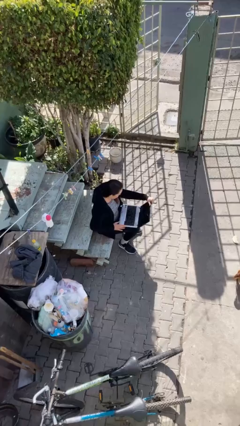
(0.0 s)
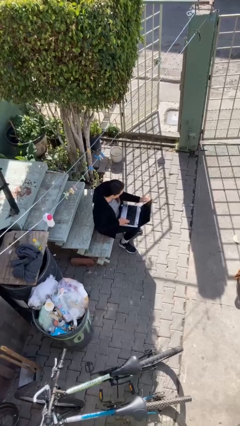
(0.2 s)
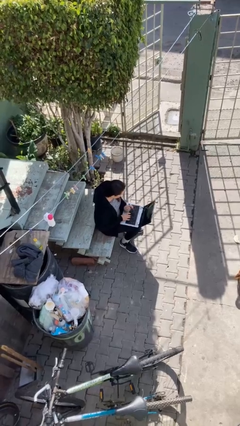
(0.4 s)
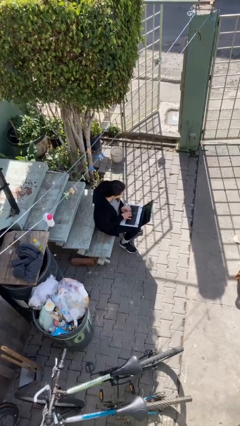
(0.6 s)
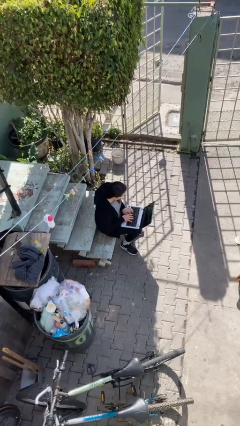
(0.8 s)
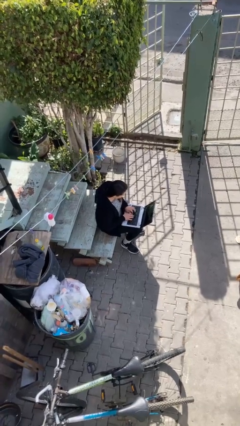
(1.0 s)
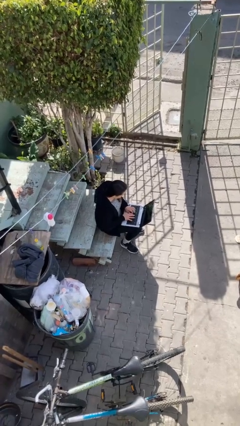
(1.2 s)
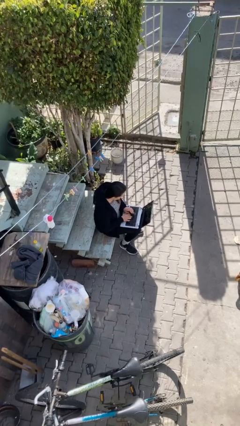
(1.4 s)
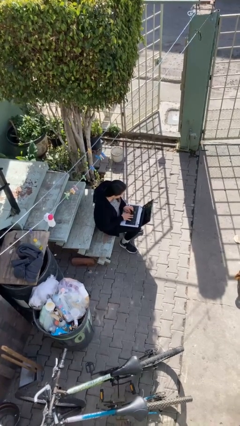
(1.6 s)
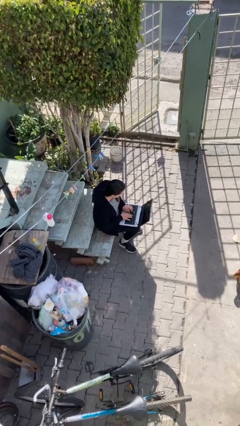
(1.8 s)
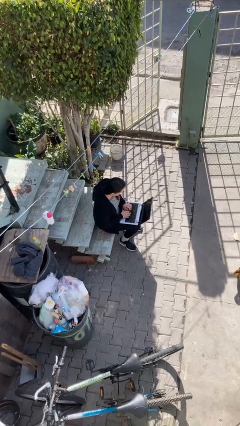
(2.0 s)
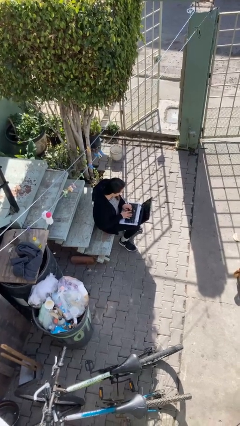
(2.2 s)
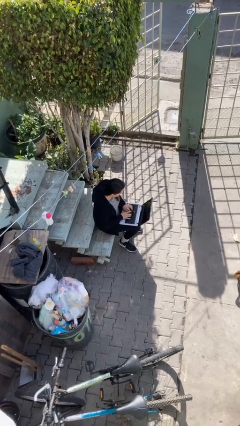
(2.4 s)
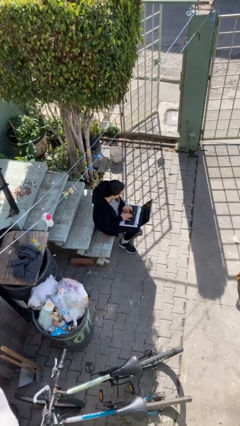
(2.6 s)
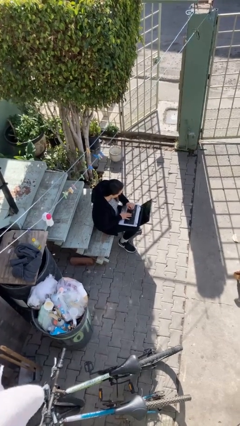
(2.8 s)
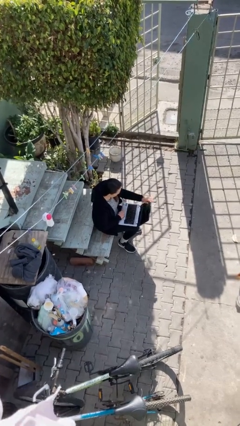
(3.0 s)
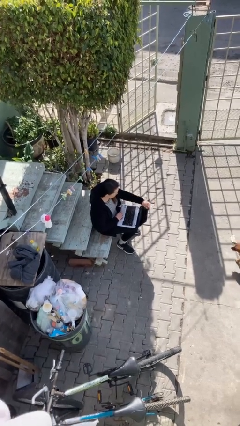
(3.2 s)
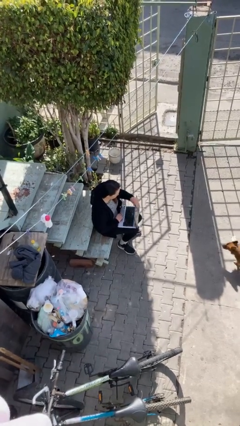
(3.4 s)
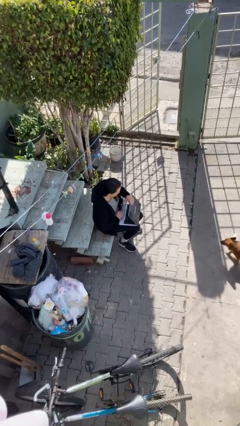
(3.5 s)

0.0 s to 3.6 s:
person interacts with laptop

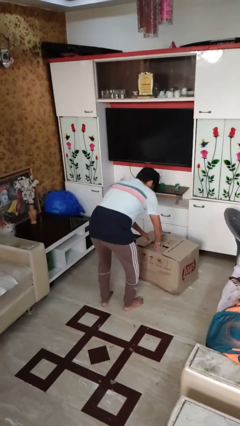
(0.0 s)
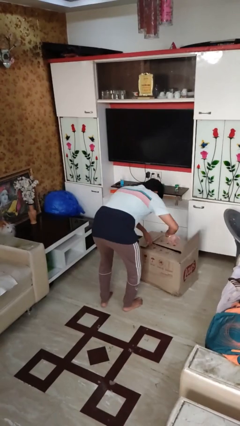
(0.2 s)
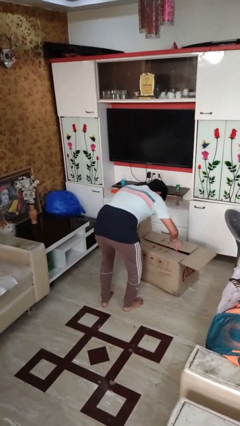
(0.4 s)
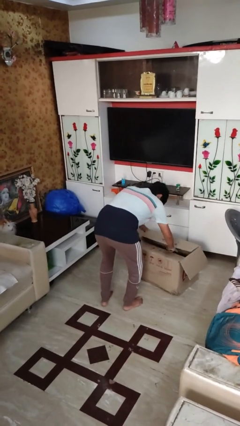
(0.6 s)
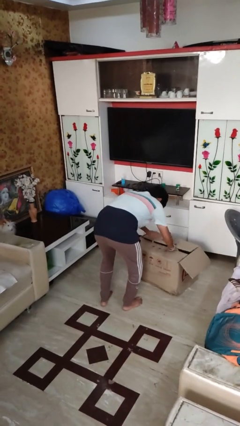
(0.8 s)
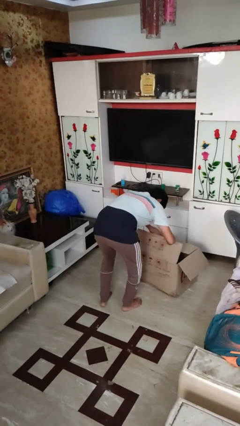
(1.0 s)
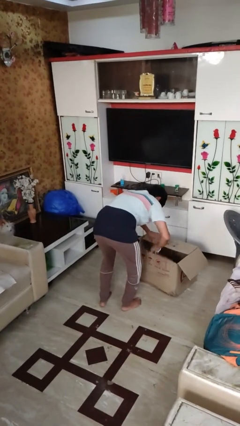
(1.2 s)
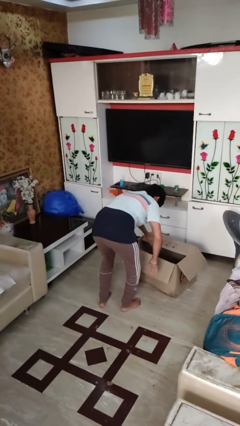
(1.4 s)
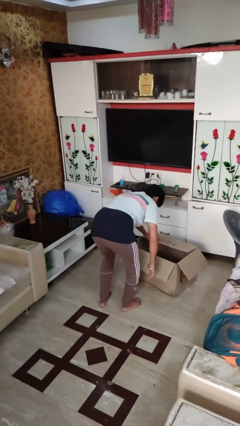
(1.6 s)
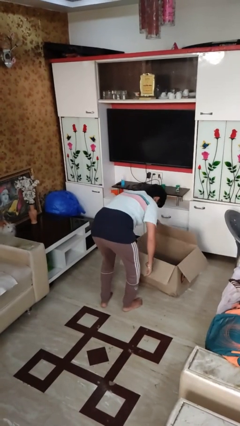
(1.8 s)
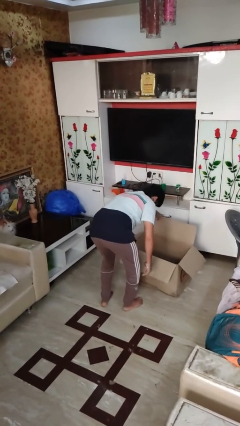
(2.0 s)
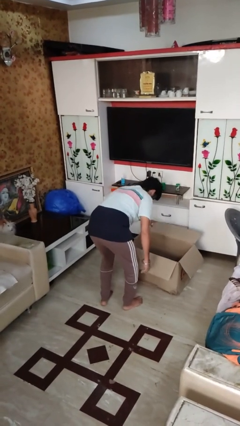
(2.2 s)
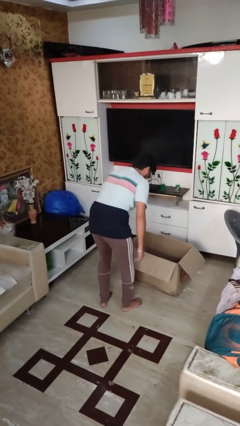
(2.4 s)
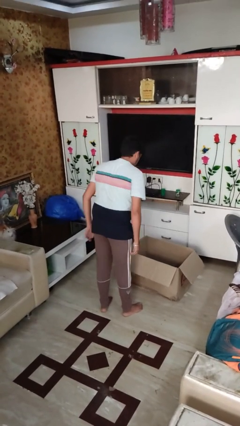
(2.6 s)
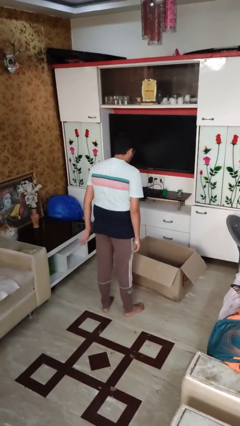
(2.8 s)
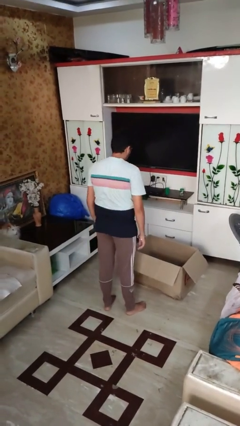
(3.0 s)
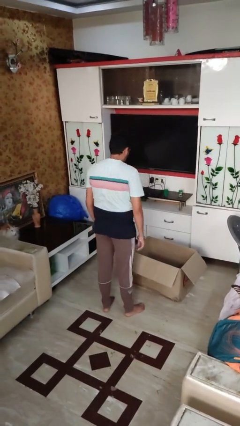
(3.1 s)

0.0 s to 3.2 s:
person opens box

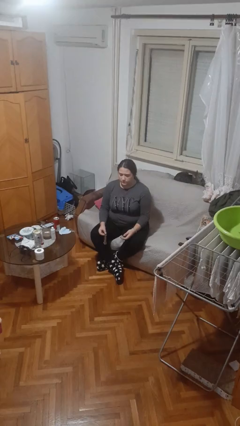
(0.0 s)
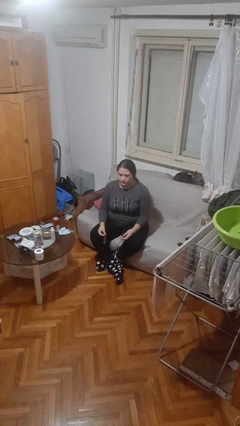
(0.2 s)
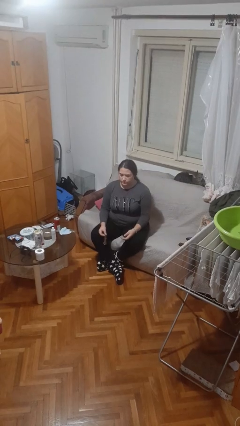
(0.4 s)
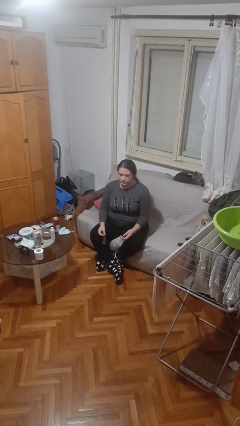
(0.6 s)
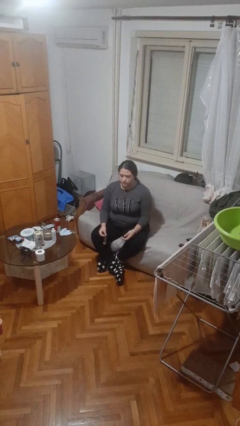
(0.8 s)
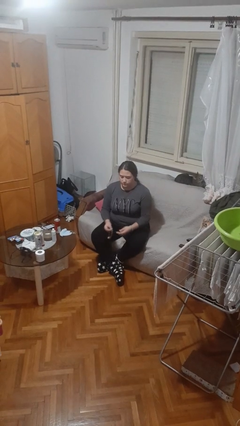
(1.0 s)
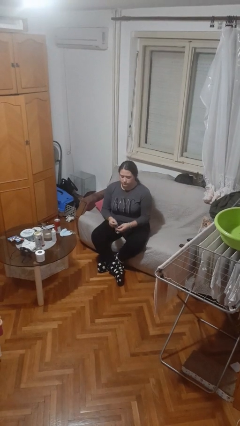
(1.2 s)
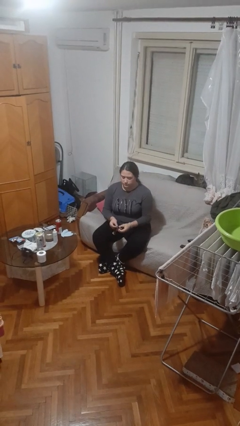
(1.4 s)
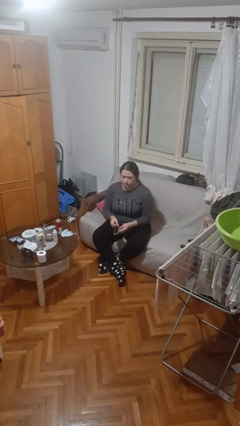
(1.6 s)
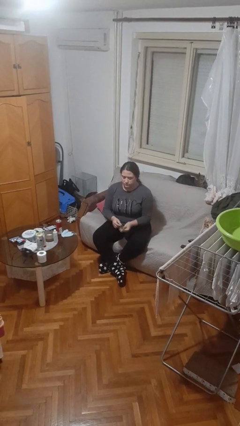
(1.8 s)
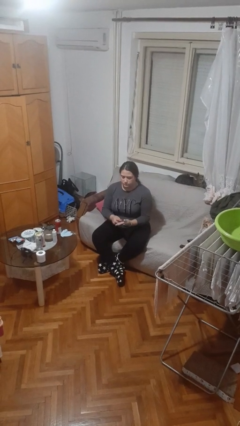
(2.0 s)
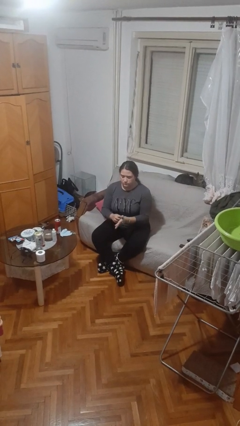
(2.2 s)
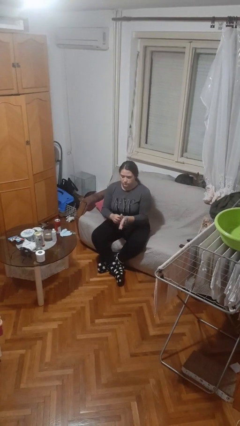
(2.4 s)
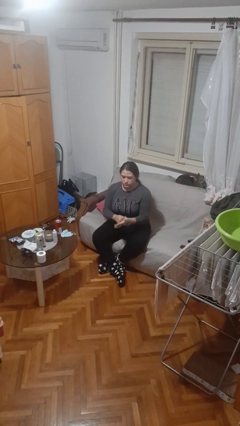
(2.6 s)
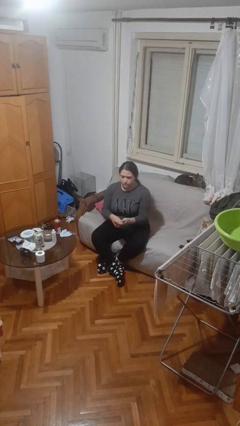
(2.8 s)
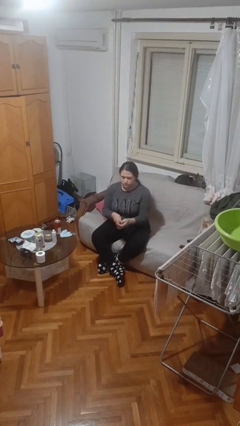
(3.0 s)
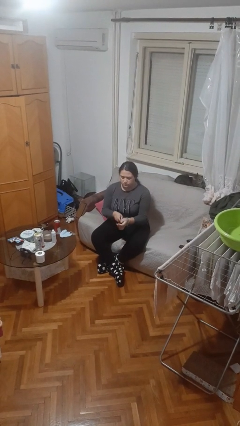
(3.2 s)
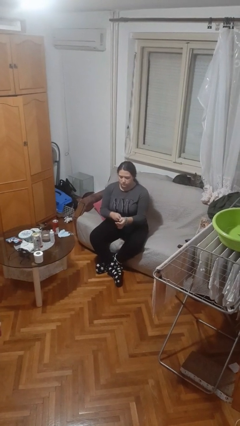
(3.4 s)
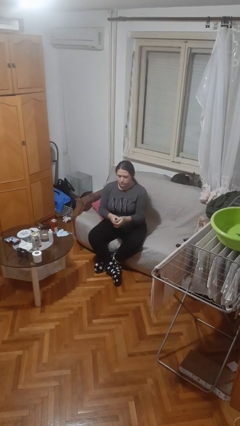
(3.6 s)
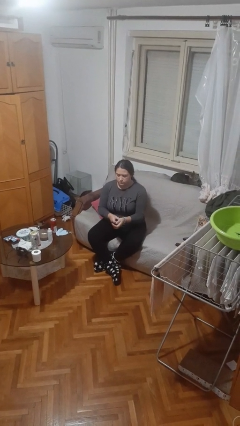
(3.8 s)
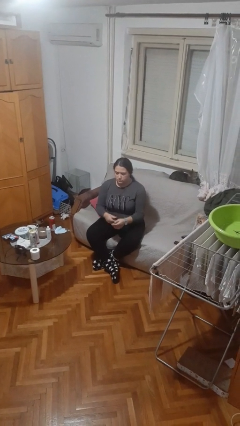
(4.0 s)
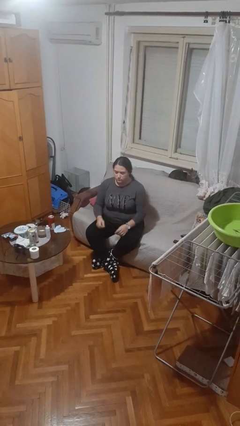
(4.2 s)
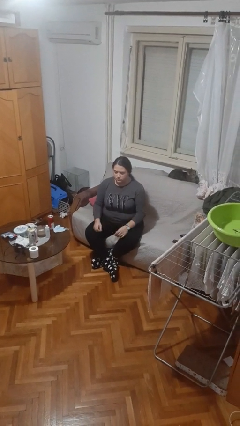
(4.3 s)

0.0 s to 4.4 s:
person puts on wristwatch

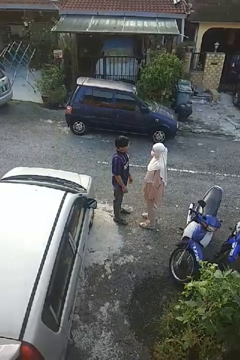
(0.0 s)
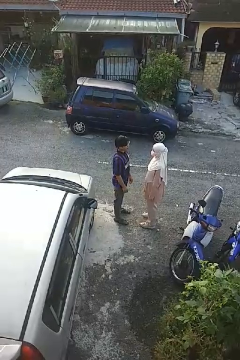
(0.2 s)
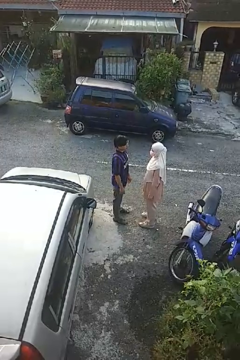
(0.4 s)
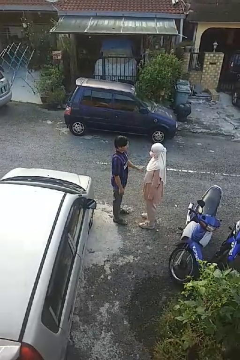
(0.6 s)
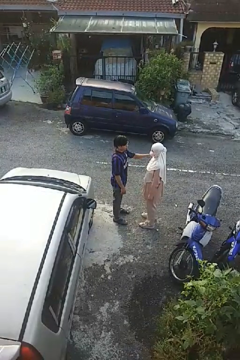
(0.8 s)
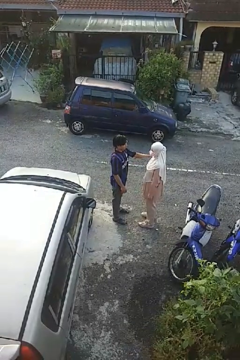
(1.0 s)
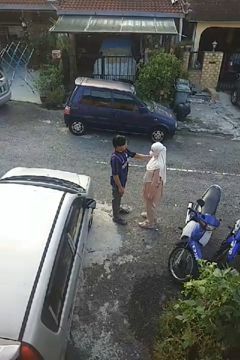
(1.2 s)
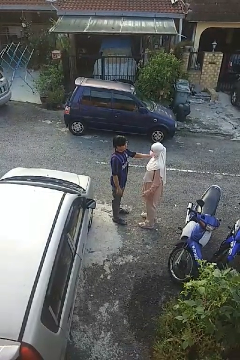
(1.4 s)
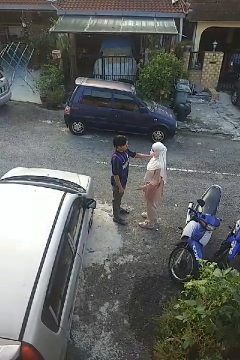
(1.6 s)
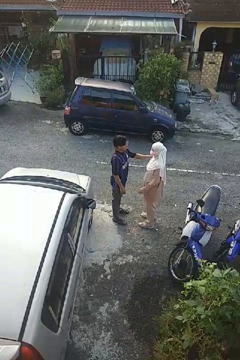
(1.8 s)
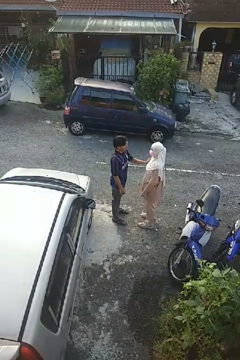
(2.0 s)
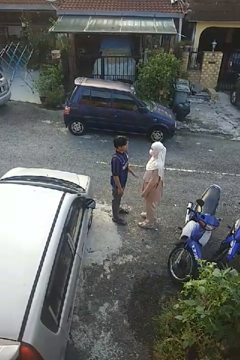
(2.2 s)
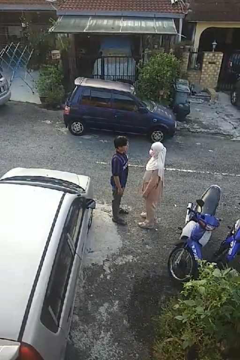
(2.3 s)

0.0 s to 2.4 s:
person pounds shoulders of person

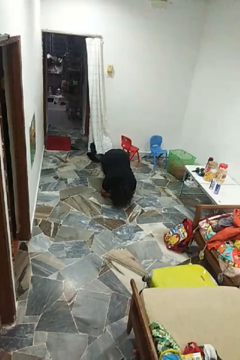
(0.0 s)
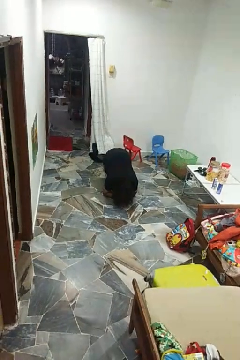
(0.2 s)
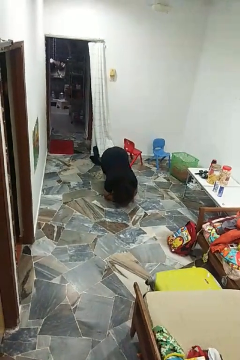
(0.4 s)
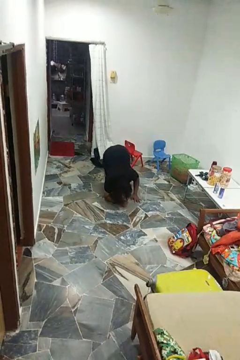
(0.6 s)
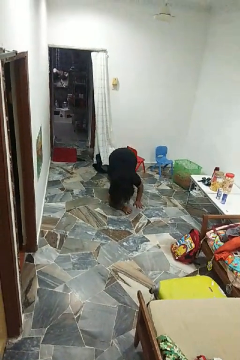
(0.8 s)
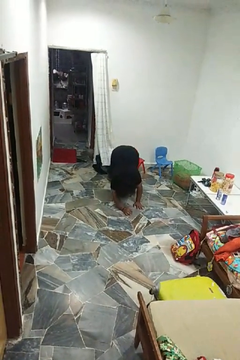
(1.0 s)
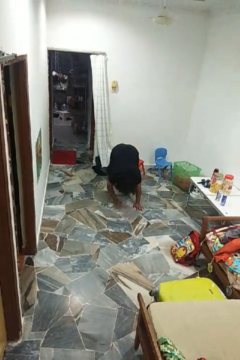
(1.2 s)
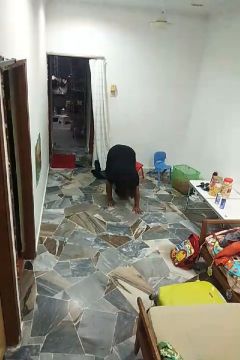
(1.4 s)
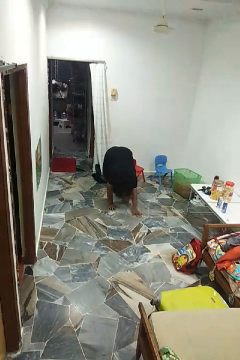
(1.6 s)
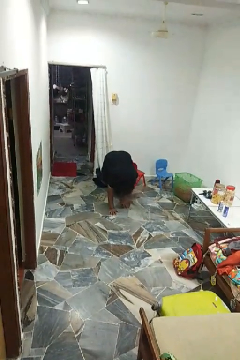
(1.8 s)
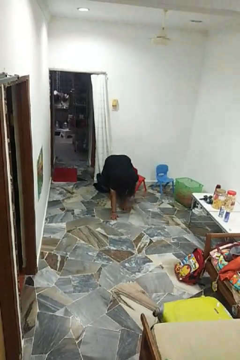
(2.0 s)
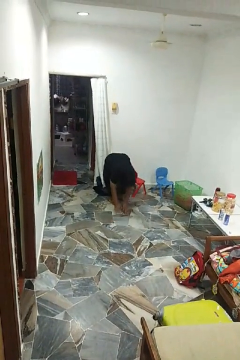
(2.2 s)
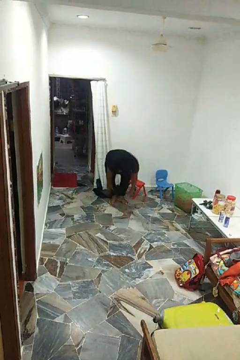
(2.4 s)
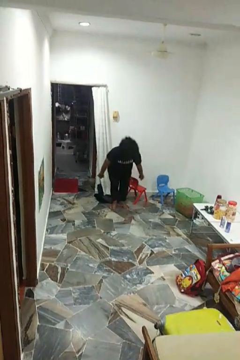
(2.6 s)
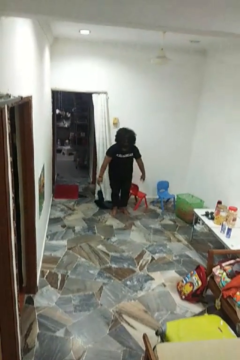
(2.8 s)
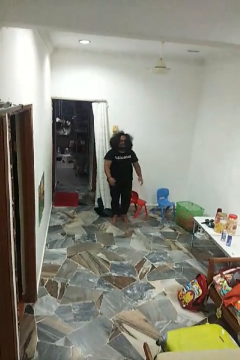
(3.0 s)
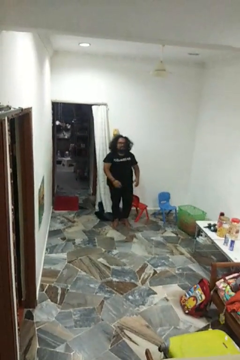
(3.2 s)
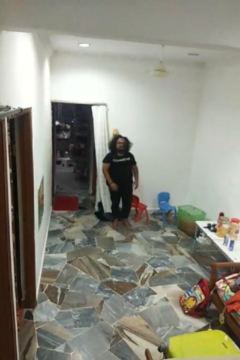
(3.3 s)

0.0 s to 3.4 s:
person stands up from floor

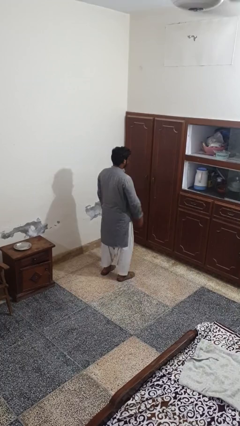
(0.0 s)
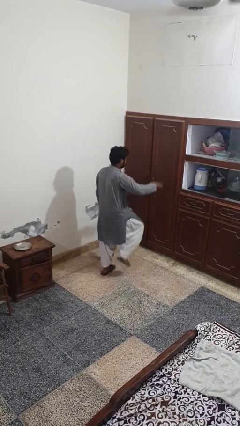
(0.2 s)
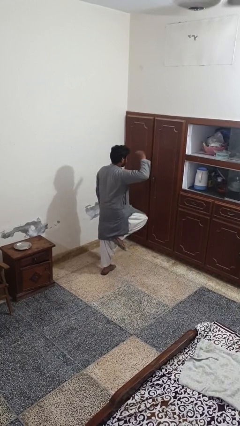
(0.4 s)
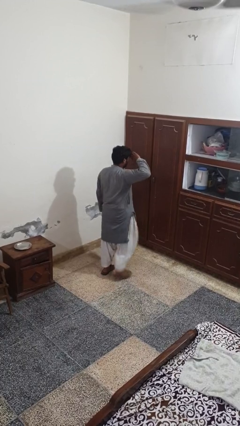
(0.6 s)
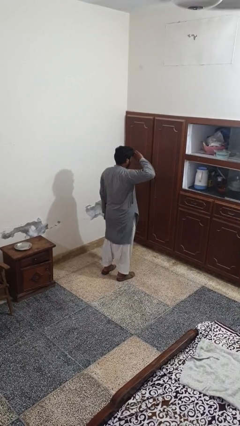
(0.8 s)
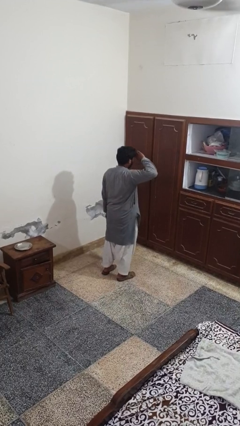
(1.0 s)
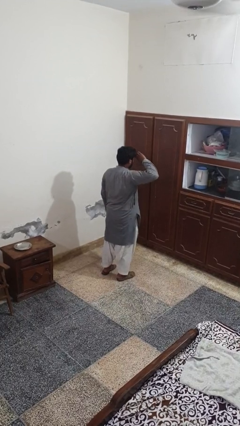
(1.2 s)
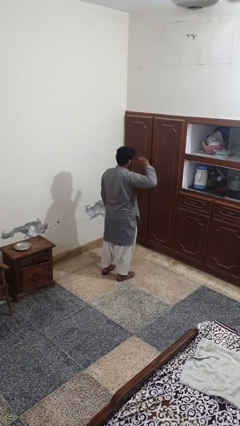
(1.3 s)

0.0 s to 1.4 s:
person salutes
